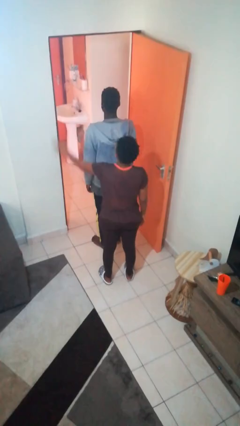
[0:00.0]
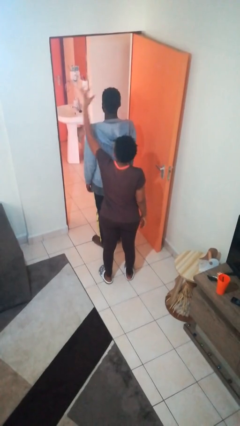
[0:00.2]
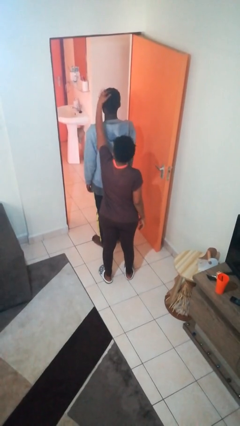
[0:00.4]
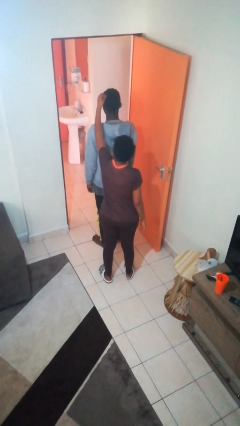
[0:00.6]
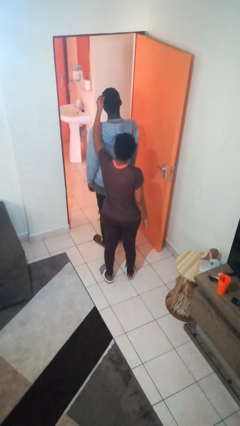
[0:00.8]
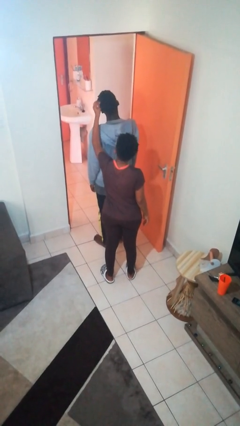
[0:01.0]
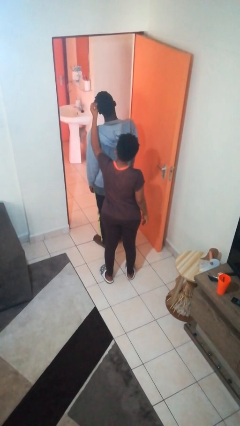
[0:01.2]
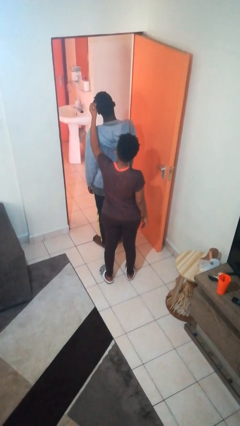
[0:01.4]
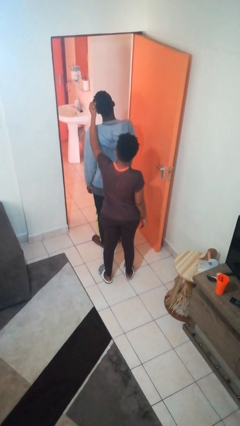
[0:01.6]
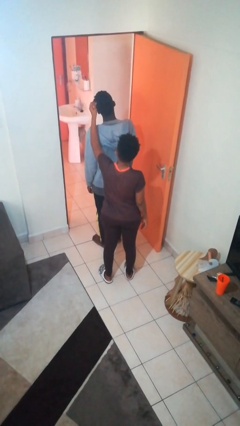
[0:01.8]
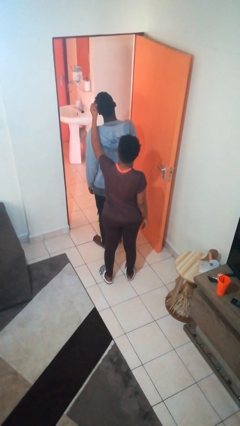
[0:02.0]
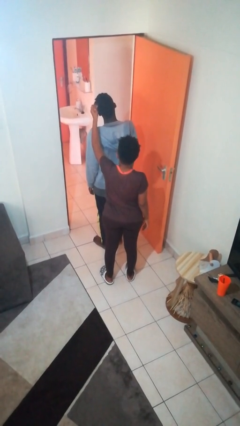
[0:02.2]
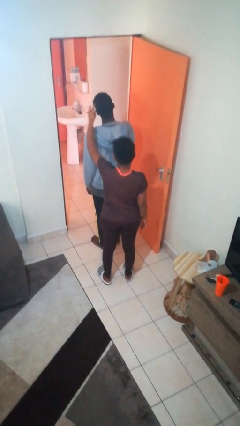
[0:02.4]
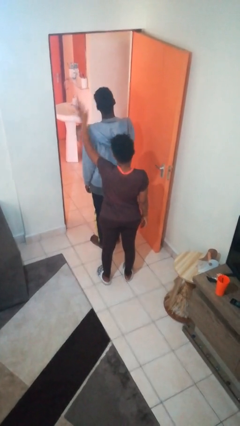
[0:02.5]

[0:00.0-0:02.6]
person grabs person by hair

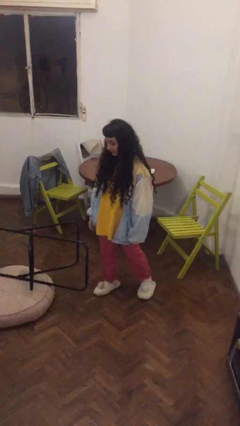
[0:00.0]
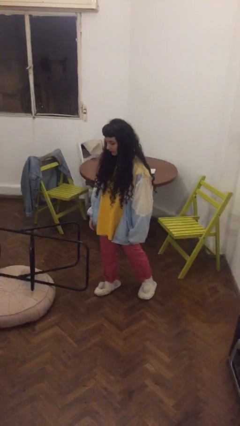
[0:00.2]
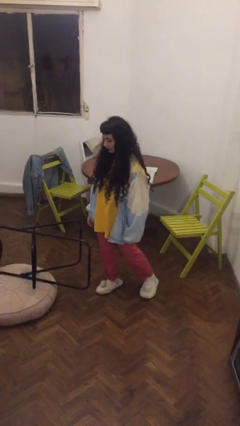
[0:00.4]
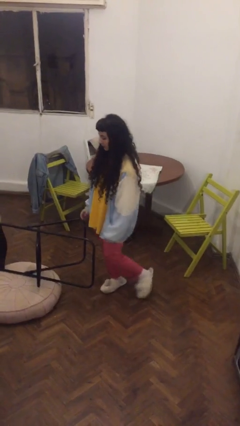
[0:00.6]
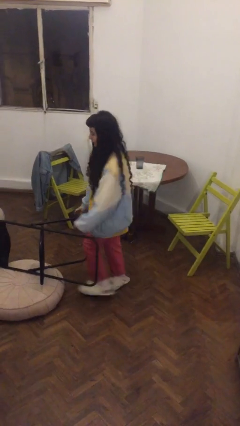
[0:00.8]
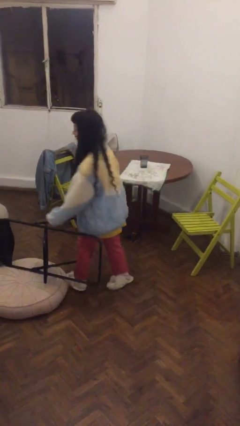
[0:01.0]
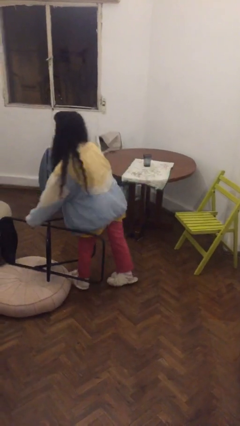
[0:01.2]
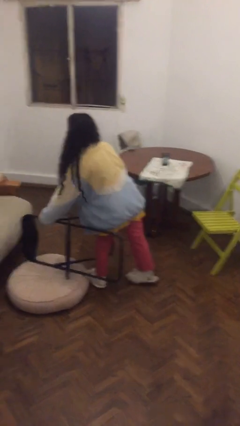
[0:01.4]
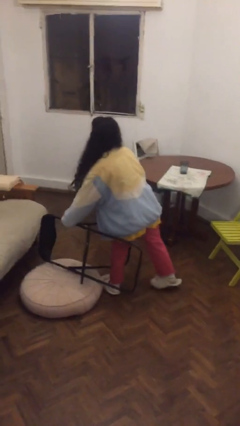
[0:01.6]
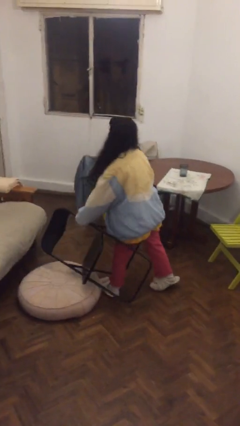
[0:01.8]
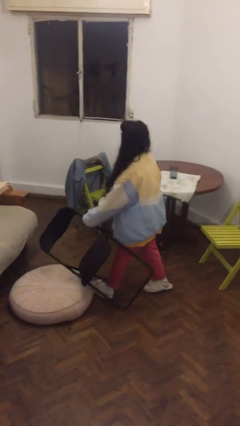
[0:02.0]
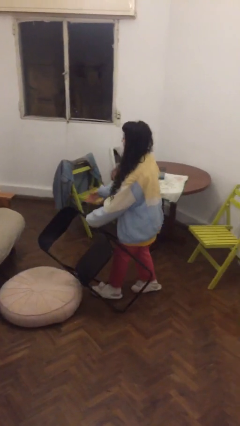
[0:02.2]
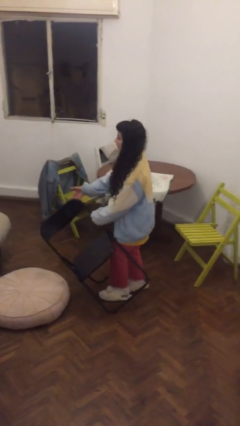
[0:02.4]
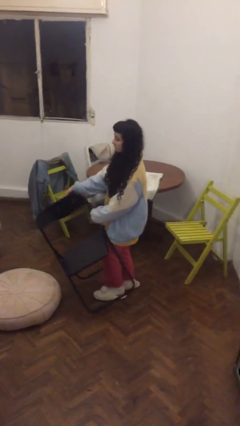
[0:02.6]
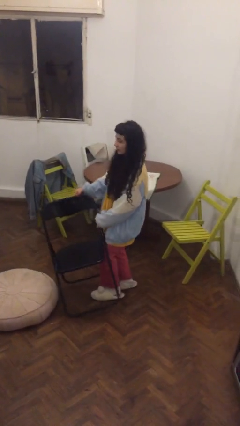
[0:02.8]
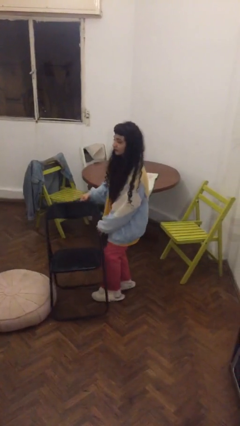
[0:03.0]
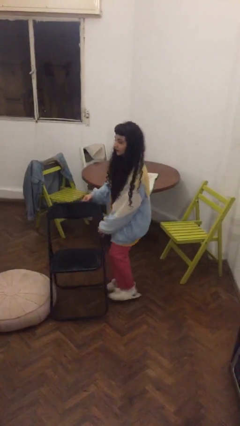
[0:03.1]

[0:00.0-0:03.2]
person sets upright furniture

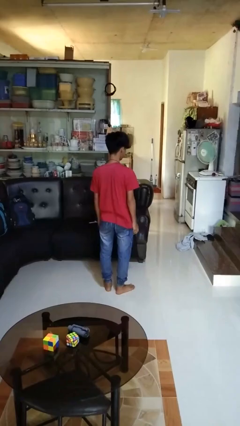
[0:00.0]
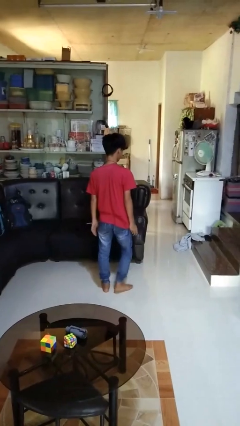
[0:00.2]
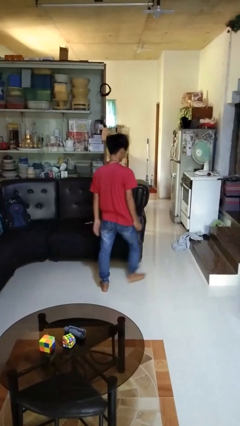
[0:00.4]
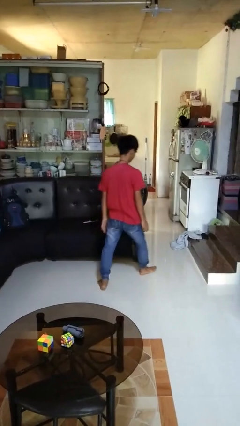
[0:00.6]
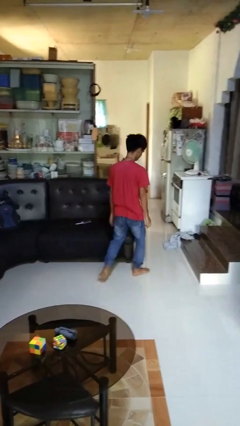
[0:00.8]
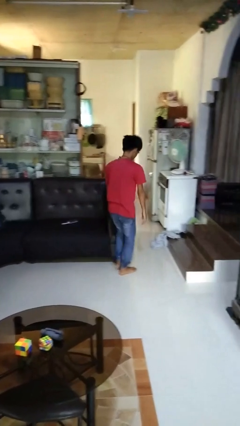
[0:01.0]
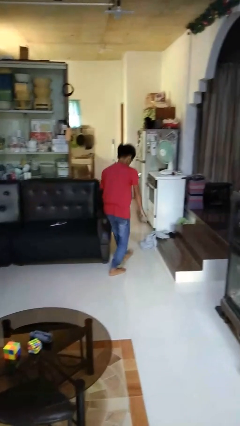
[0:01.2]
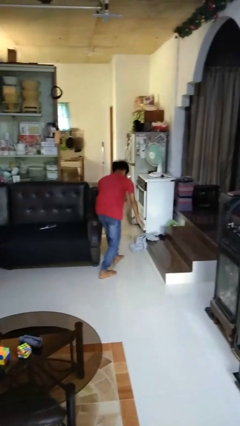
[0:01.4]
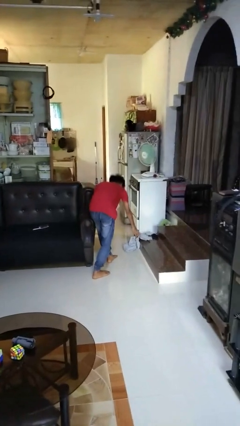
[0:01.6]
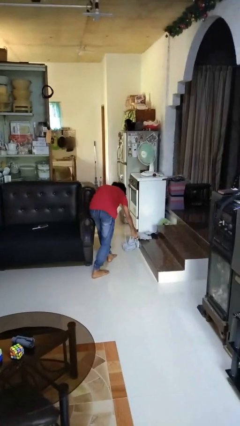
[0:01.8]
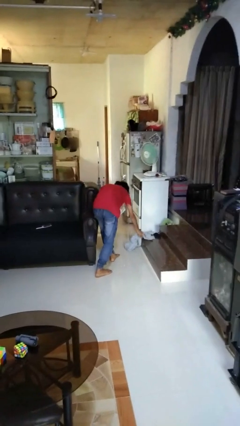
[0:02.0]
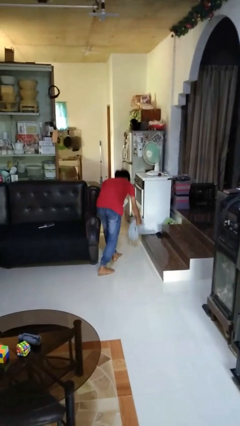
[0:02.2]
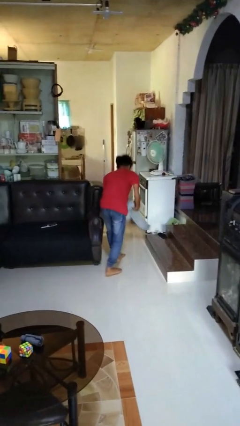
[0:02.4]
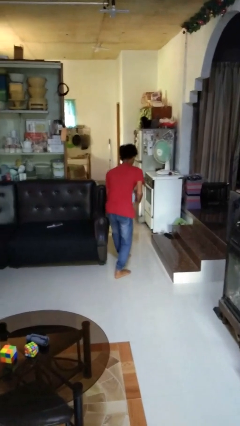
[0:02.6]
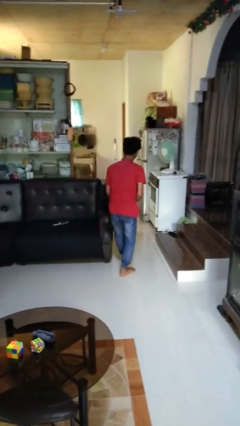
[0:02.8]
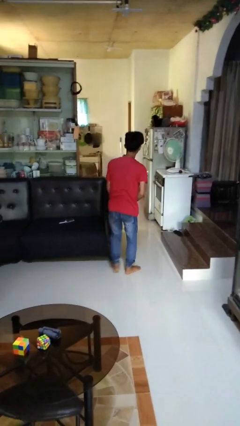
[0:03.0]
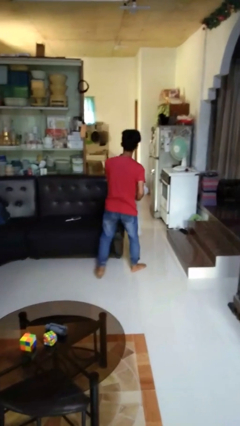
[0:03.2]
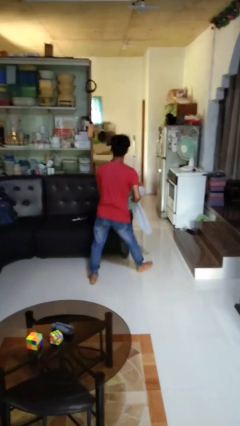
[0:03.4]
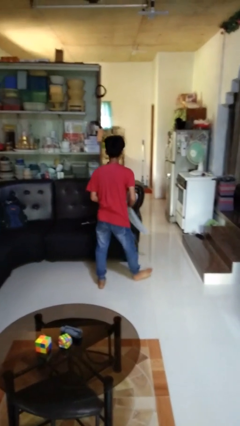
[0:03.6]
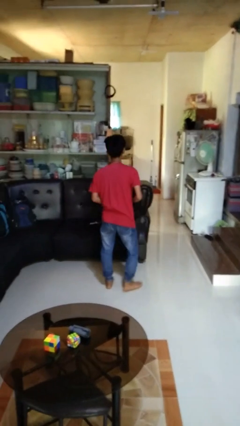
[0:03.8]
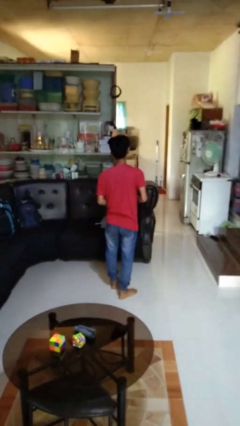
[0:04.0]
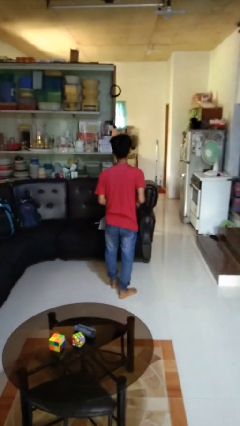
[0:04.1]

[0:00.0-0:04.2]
person picks up object from floor

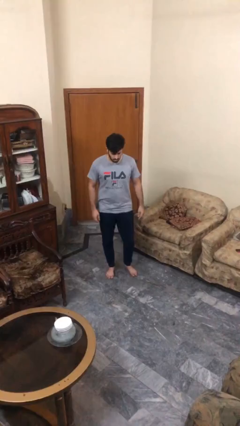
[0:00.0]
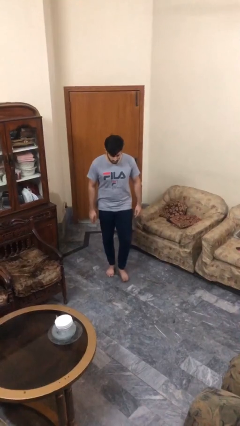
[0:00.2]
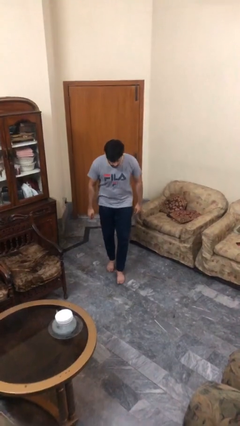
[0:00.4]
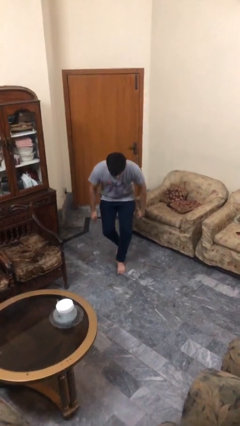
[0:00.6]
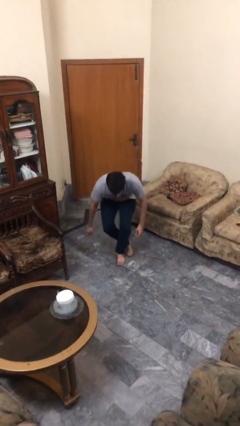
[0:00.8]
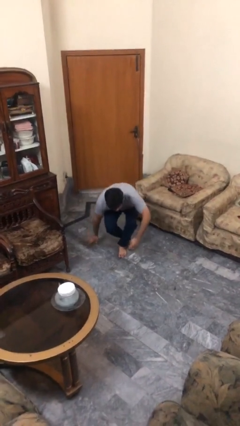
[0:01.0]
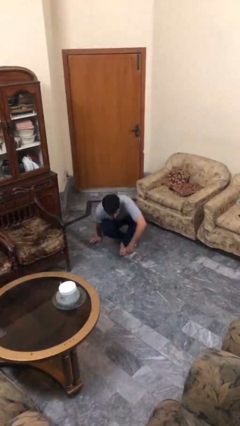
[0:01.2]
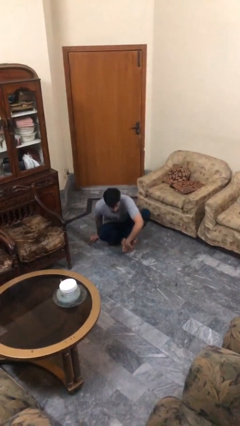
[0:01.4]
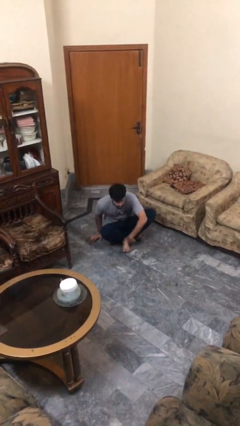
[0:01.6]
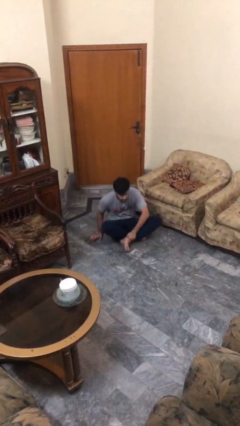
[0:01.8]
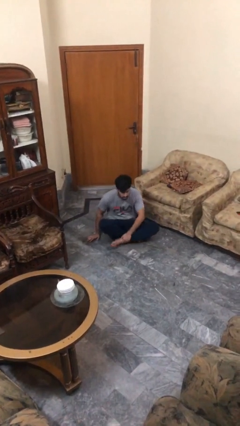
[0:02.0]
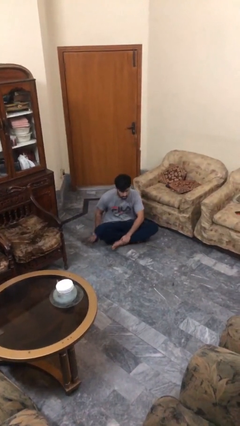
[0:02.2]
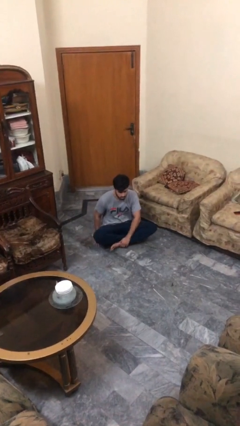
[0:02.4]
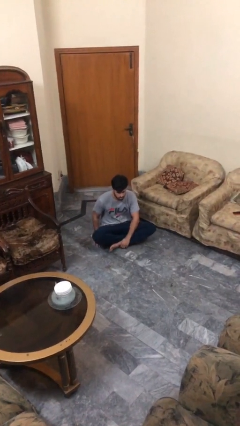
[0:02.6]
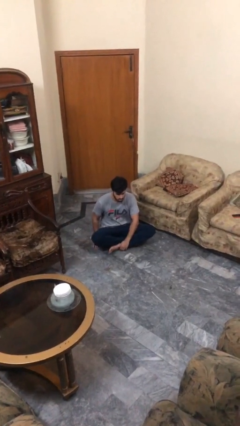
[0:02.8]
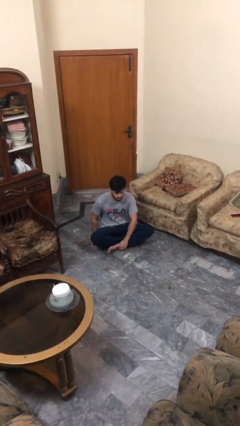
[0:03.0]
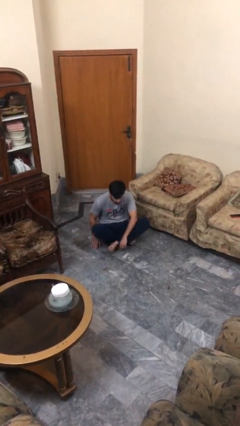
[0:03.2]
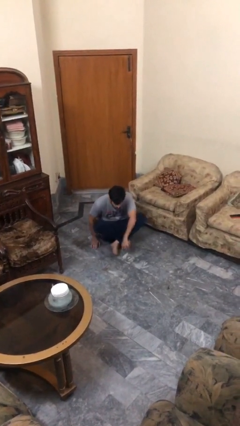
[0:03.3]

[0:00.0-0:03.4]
person sits crisscross

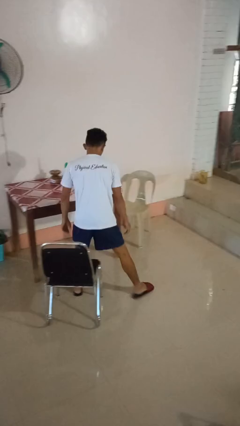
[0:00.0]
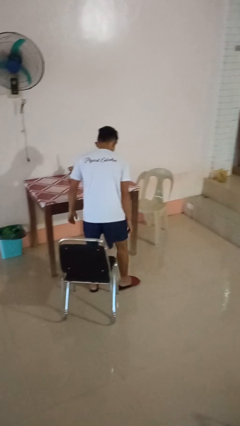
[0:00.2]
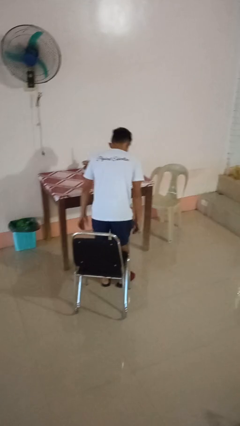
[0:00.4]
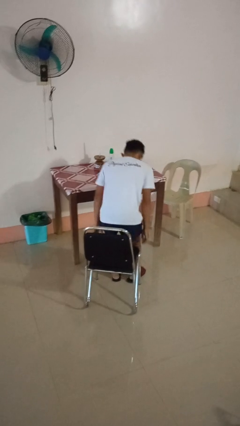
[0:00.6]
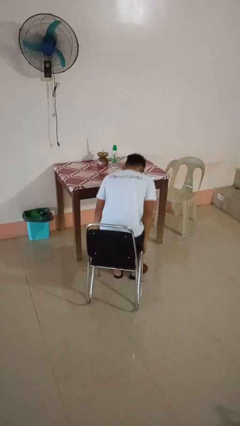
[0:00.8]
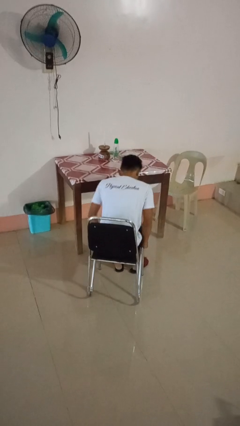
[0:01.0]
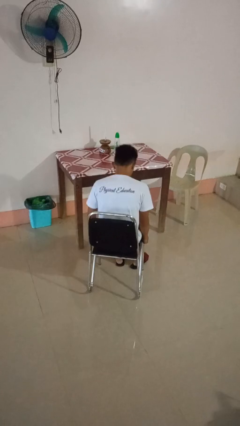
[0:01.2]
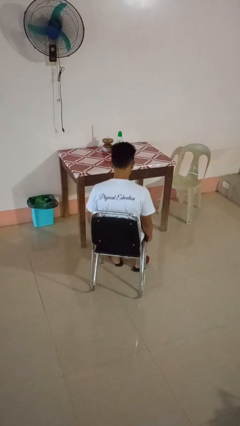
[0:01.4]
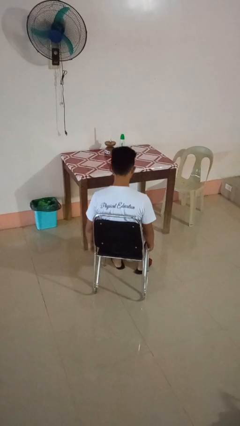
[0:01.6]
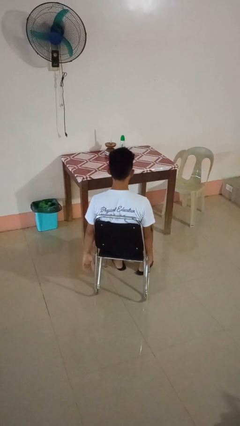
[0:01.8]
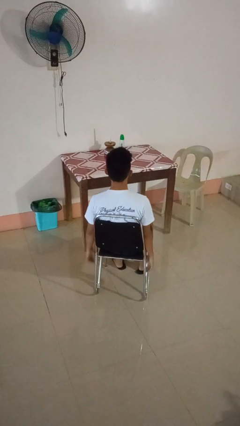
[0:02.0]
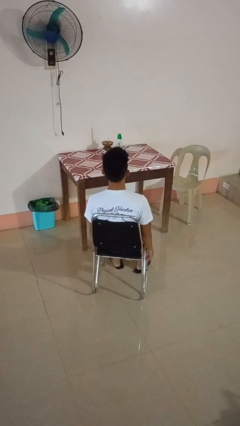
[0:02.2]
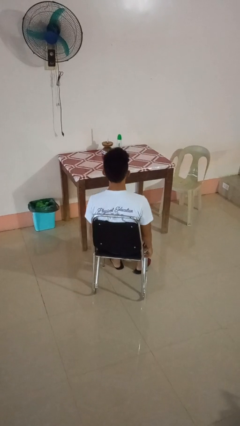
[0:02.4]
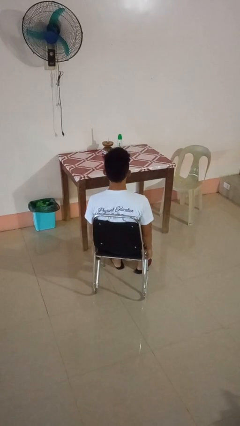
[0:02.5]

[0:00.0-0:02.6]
person sits down

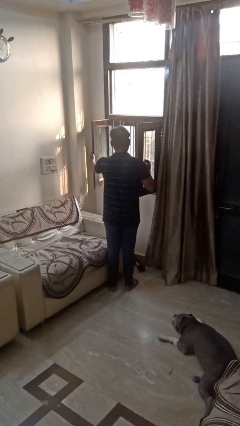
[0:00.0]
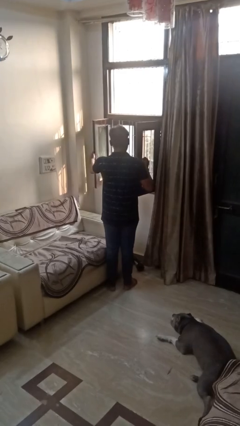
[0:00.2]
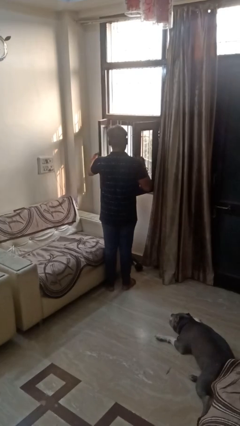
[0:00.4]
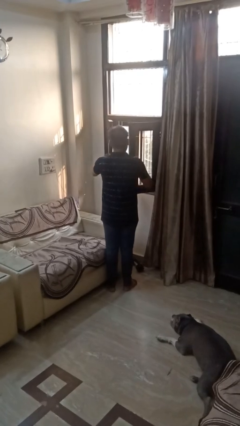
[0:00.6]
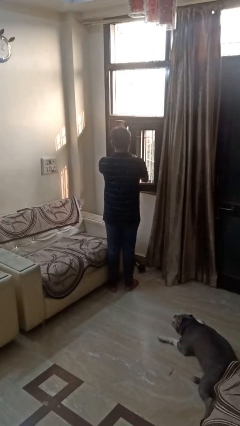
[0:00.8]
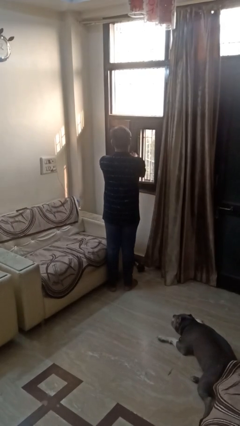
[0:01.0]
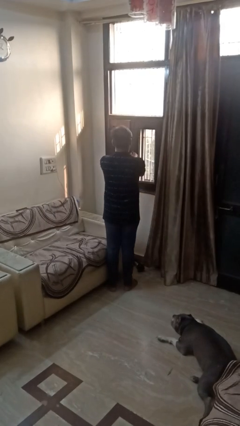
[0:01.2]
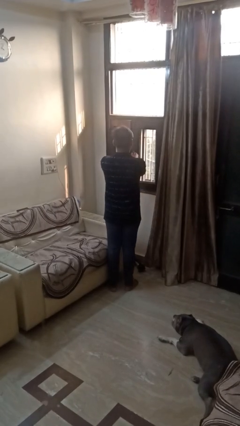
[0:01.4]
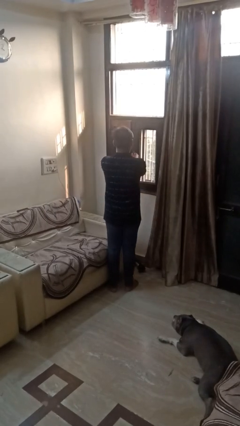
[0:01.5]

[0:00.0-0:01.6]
person closes home window
